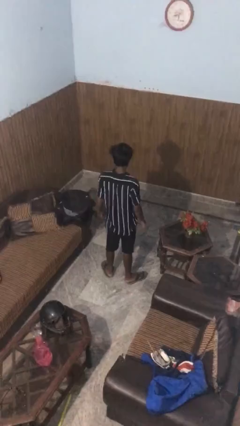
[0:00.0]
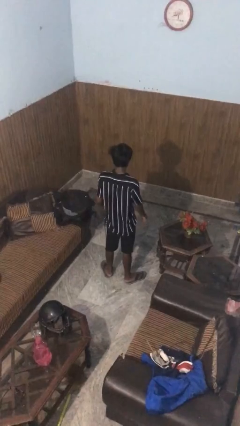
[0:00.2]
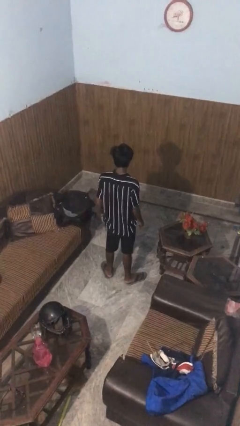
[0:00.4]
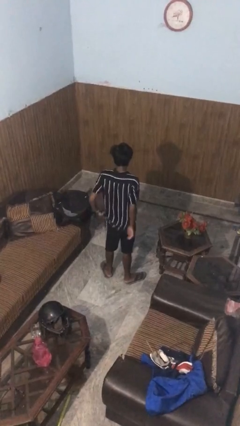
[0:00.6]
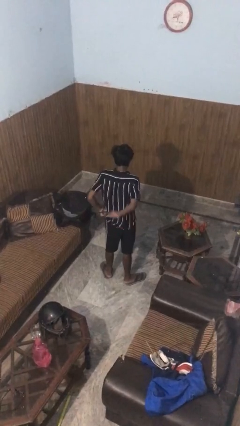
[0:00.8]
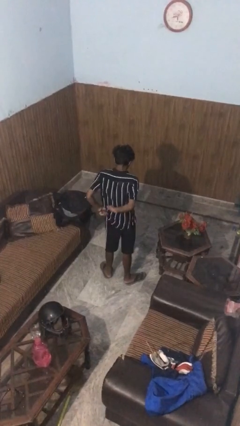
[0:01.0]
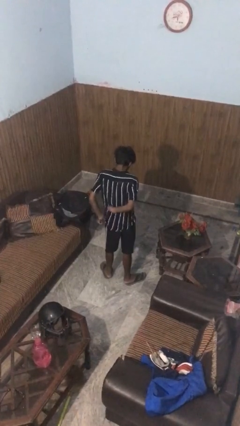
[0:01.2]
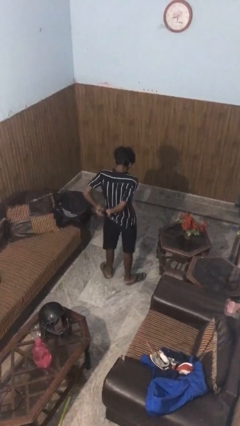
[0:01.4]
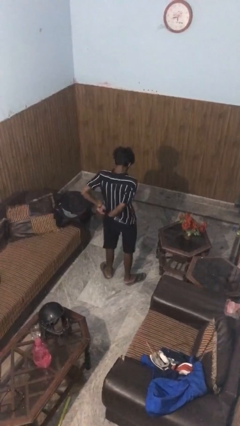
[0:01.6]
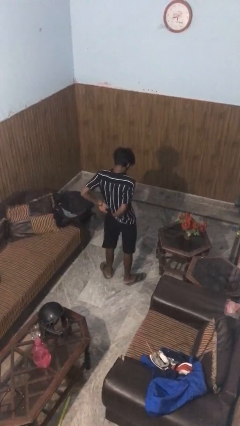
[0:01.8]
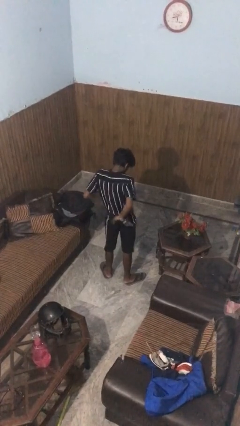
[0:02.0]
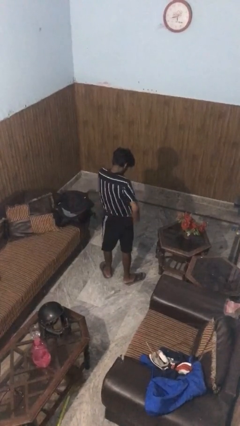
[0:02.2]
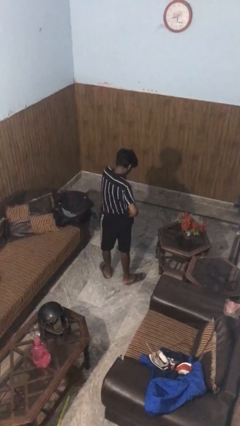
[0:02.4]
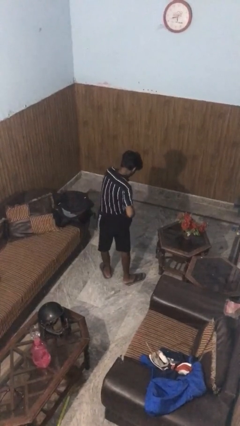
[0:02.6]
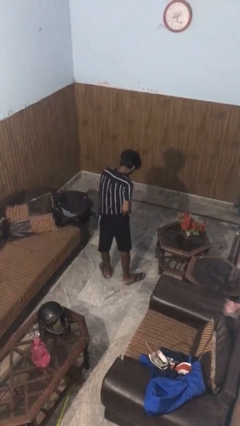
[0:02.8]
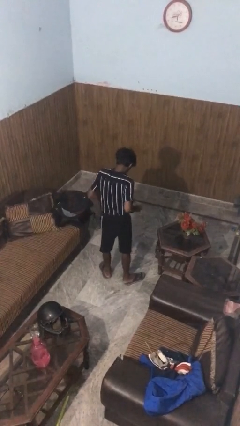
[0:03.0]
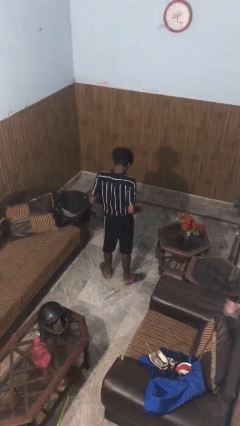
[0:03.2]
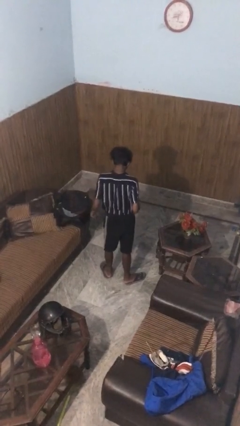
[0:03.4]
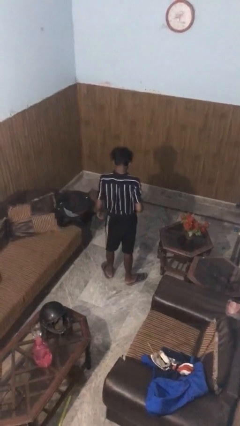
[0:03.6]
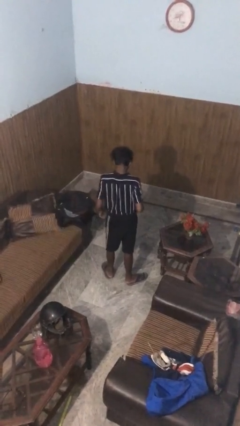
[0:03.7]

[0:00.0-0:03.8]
person tucks in shirt

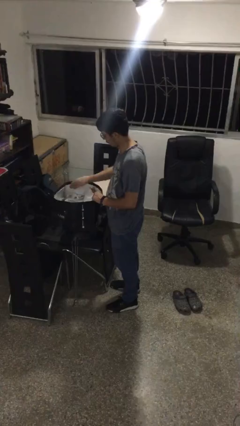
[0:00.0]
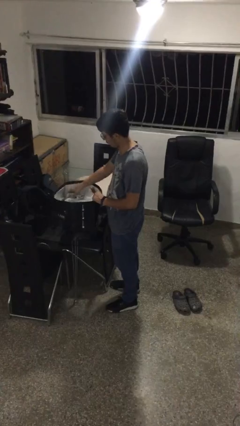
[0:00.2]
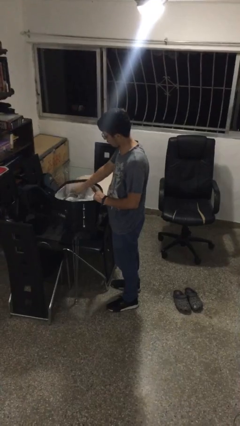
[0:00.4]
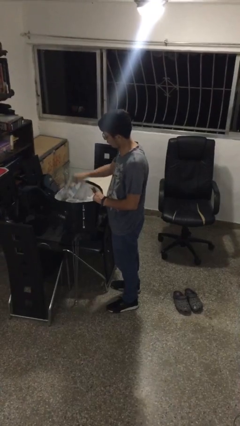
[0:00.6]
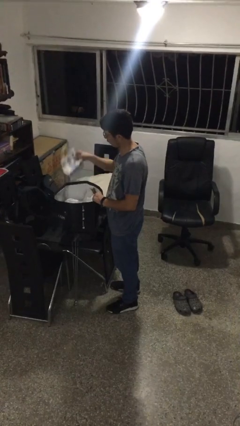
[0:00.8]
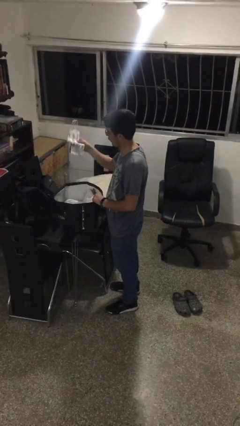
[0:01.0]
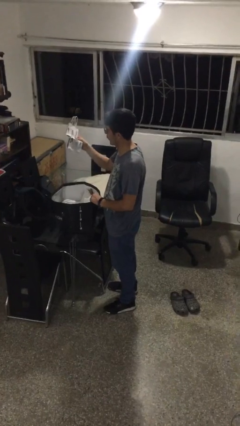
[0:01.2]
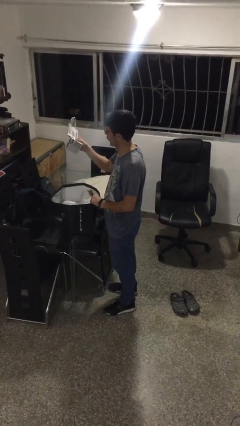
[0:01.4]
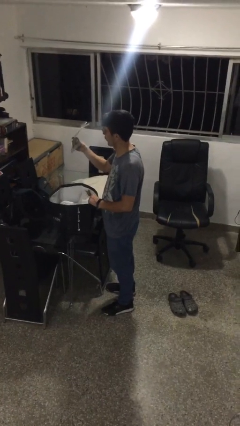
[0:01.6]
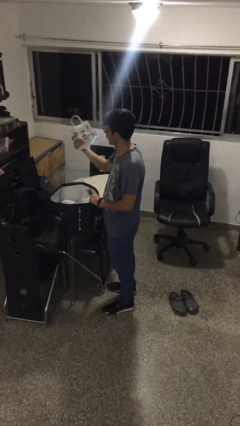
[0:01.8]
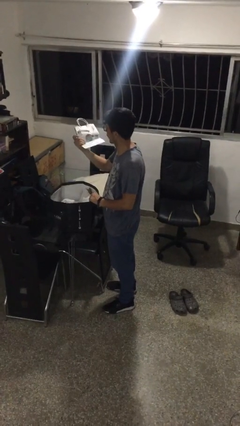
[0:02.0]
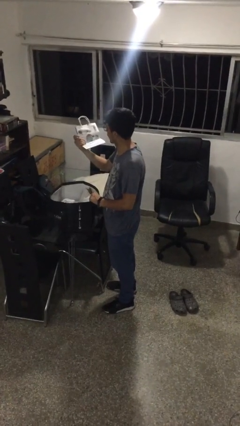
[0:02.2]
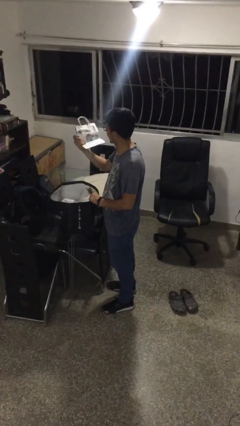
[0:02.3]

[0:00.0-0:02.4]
person takes object from bag

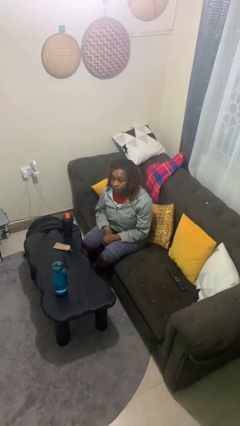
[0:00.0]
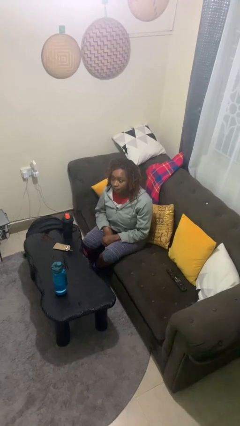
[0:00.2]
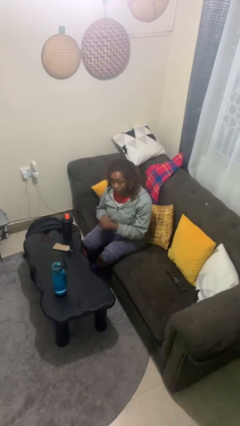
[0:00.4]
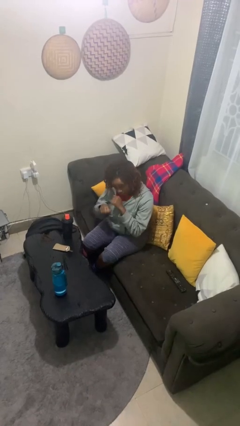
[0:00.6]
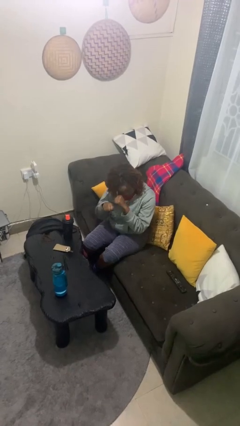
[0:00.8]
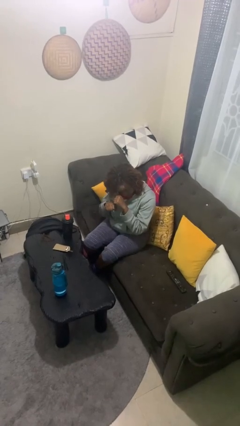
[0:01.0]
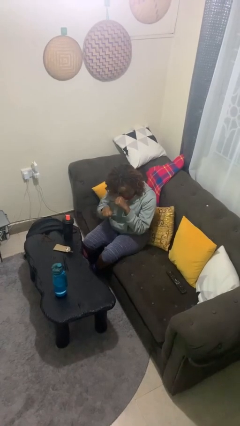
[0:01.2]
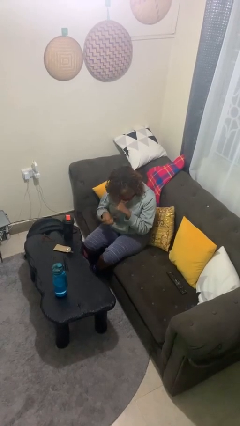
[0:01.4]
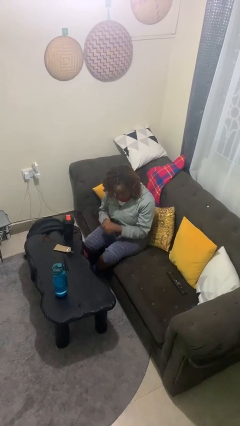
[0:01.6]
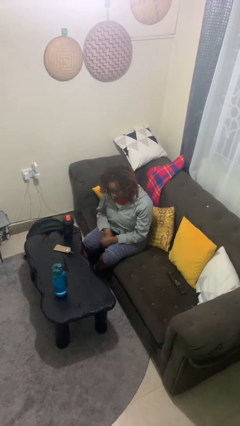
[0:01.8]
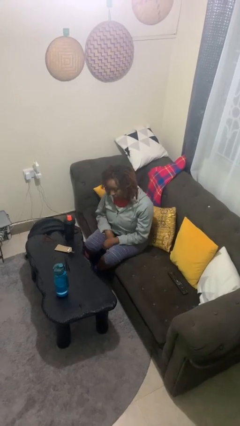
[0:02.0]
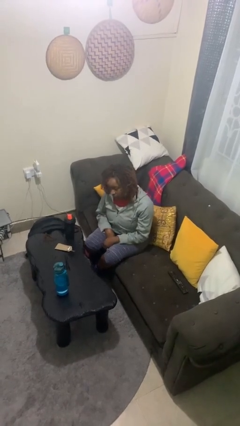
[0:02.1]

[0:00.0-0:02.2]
person punches

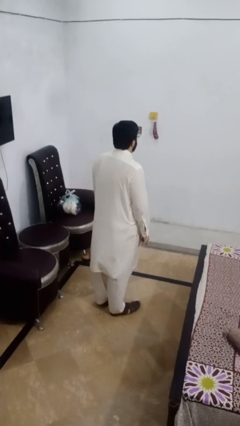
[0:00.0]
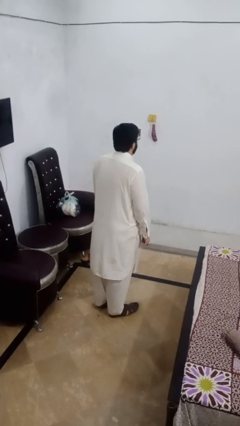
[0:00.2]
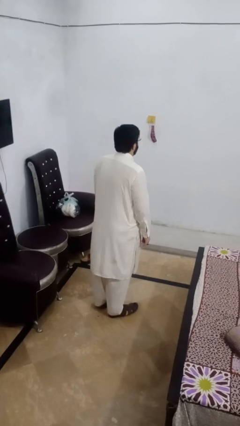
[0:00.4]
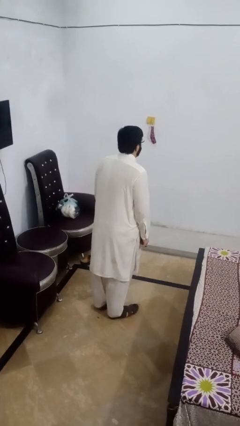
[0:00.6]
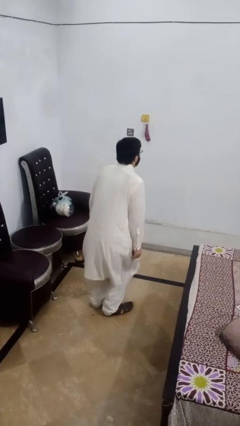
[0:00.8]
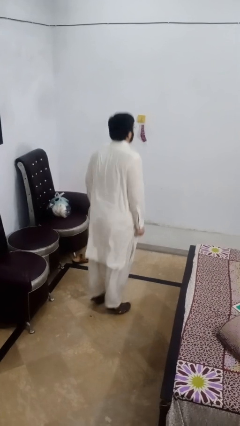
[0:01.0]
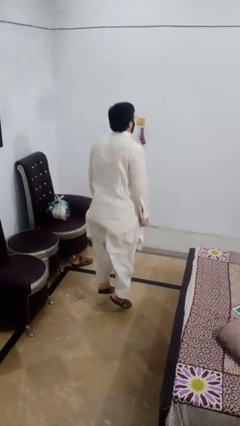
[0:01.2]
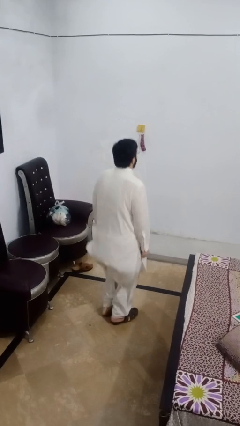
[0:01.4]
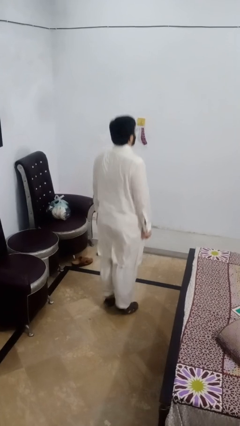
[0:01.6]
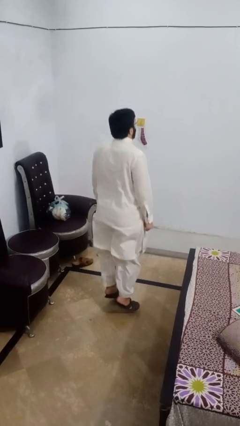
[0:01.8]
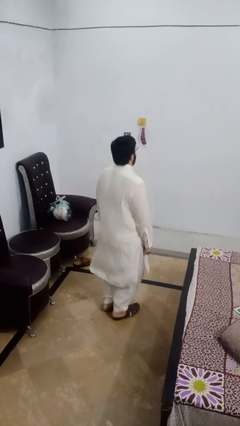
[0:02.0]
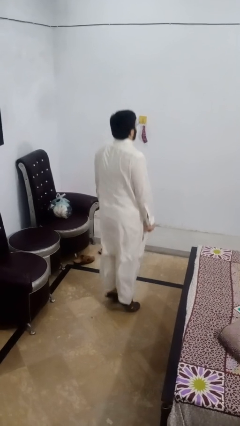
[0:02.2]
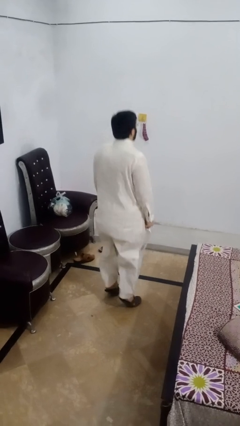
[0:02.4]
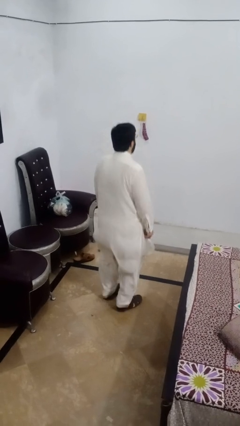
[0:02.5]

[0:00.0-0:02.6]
person jumps

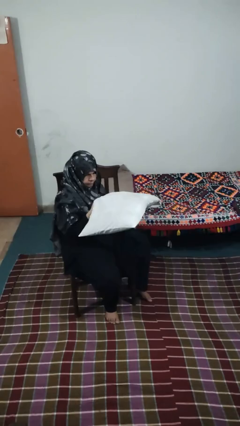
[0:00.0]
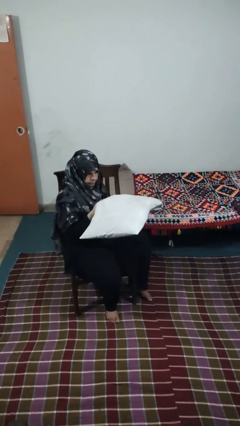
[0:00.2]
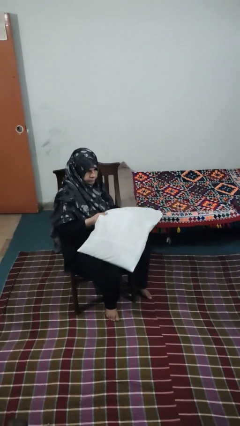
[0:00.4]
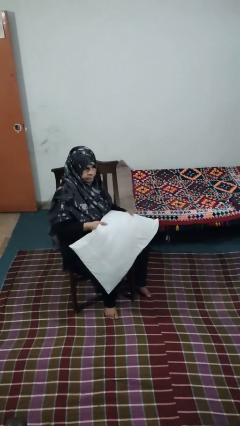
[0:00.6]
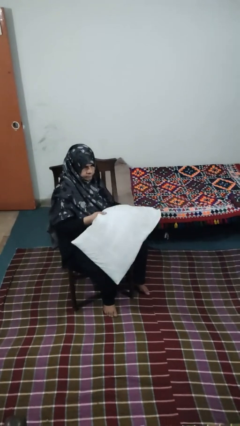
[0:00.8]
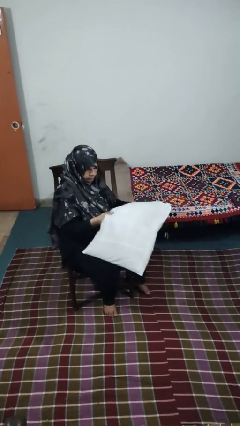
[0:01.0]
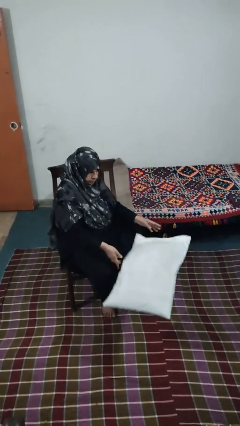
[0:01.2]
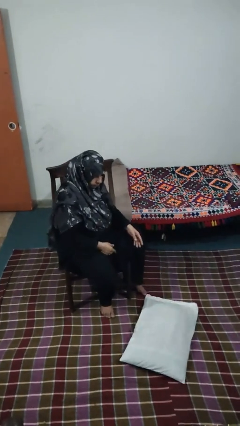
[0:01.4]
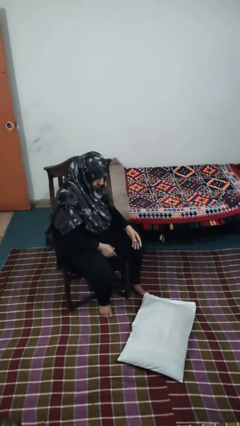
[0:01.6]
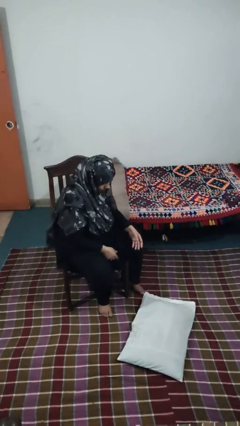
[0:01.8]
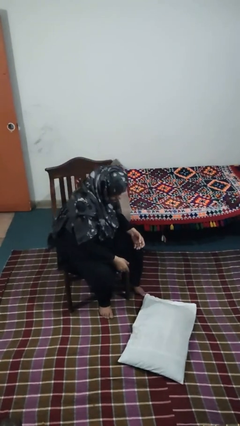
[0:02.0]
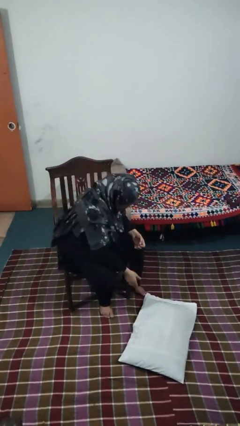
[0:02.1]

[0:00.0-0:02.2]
person drops object

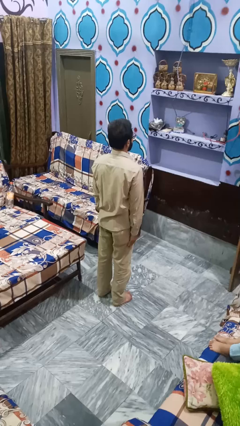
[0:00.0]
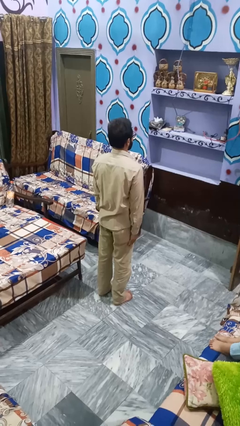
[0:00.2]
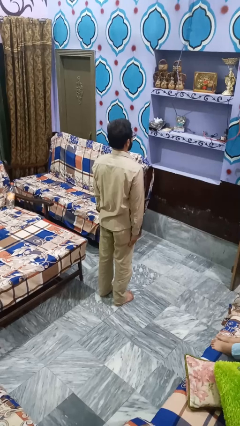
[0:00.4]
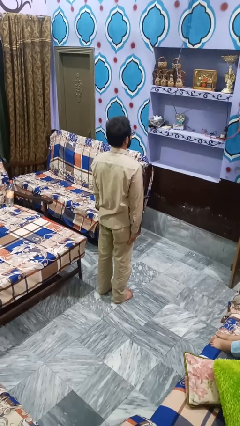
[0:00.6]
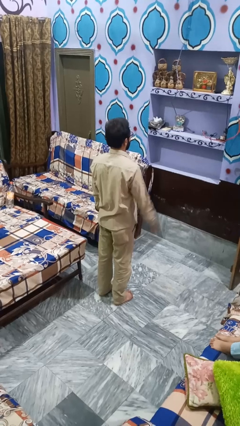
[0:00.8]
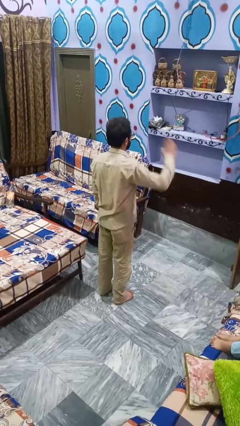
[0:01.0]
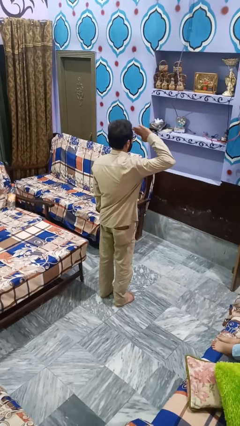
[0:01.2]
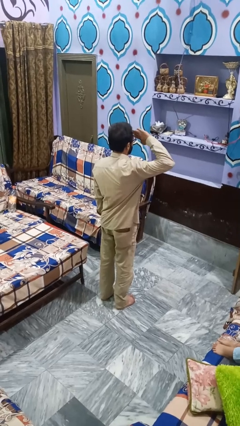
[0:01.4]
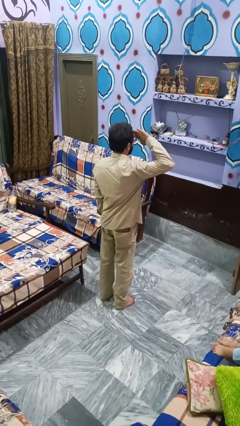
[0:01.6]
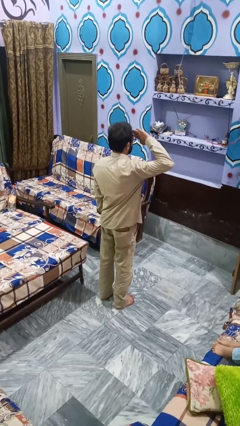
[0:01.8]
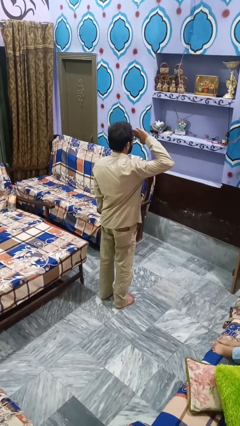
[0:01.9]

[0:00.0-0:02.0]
person salutes

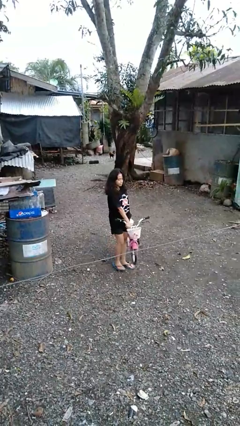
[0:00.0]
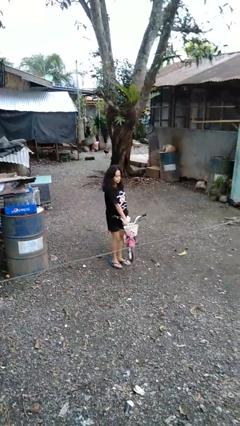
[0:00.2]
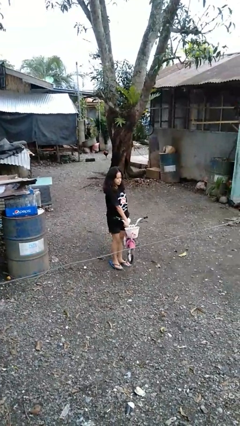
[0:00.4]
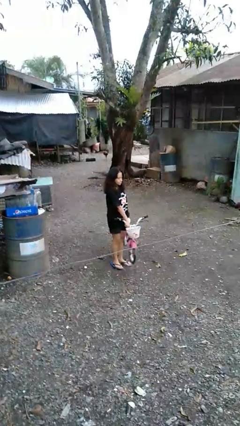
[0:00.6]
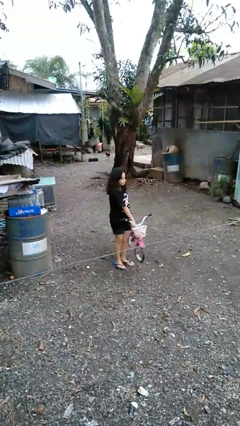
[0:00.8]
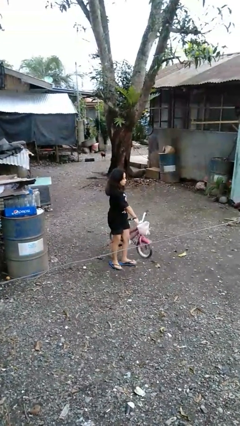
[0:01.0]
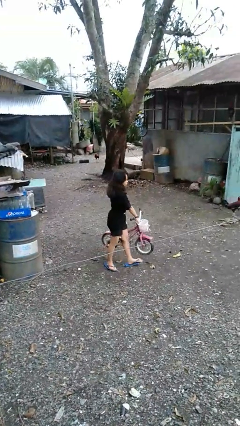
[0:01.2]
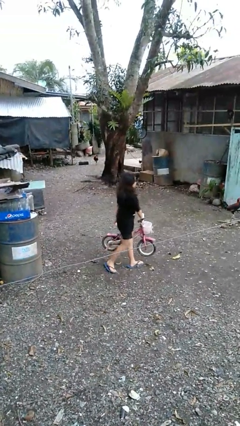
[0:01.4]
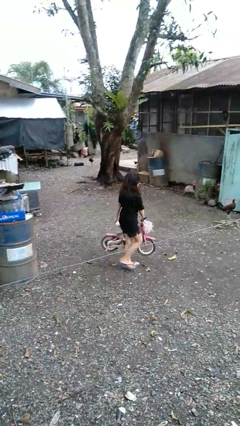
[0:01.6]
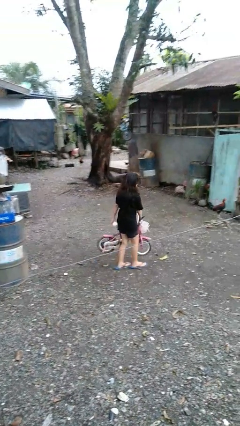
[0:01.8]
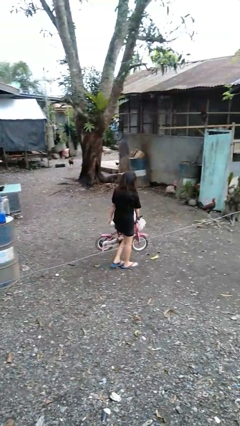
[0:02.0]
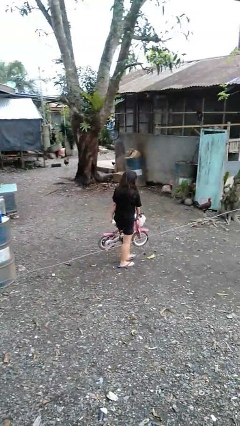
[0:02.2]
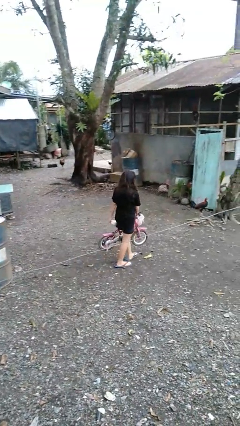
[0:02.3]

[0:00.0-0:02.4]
person carries bicycle
